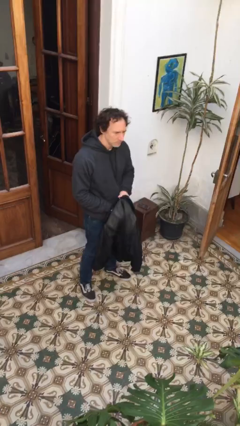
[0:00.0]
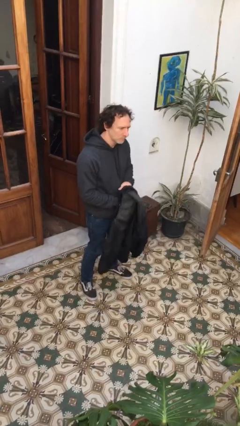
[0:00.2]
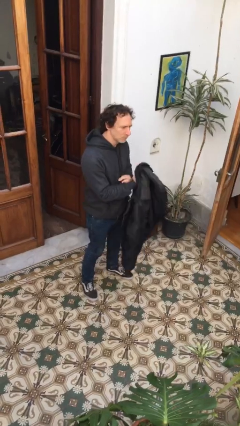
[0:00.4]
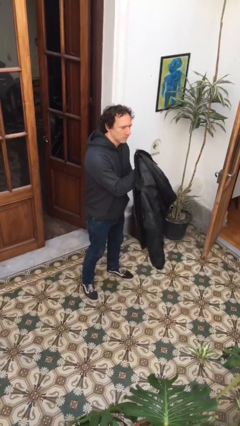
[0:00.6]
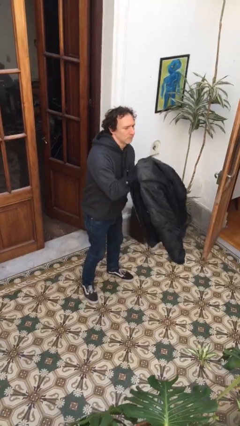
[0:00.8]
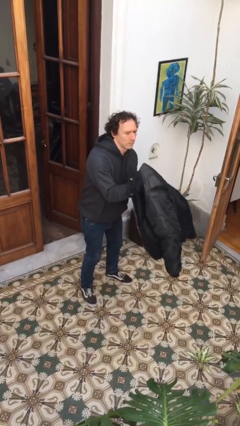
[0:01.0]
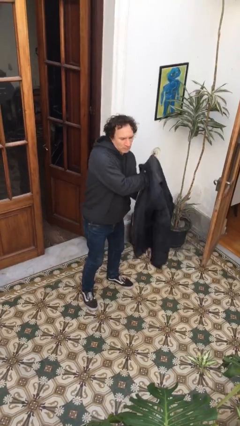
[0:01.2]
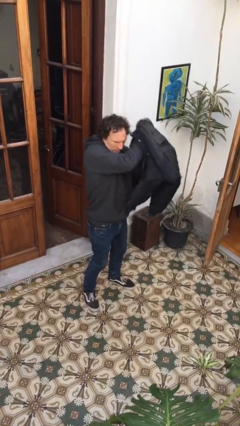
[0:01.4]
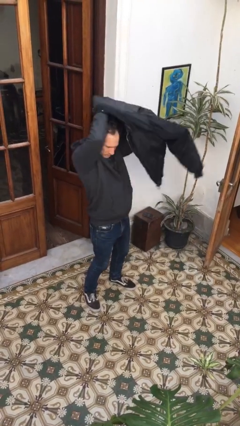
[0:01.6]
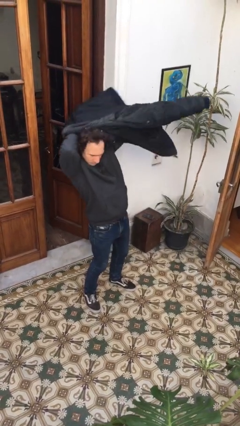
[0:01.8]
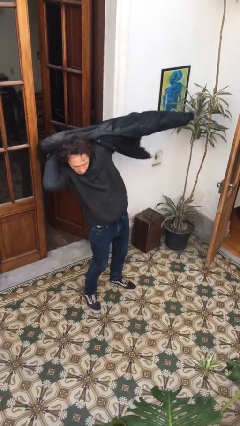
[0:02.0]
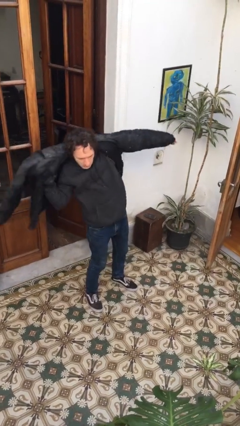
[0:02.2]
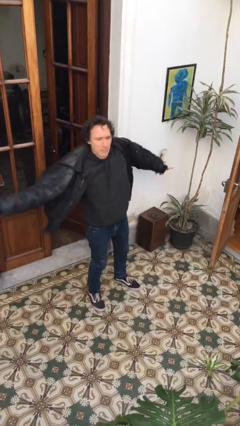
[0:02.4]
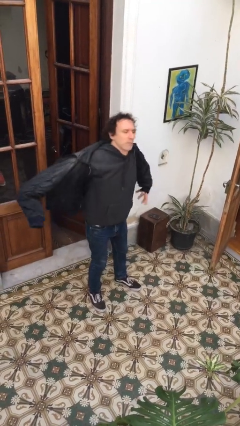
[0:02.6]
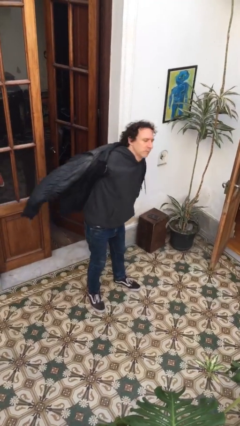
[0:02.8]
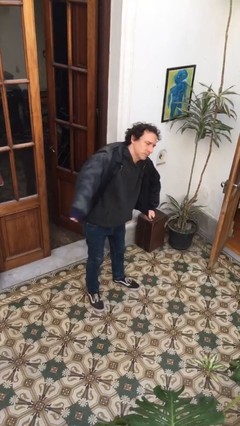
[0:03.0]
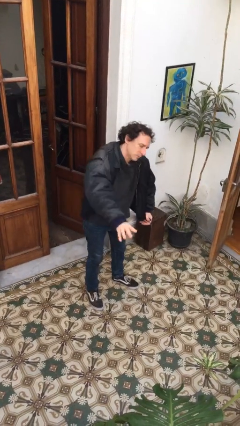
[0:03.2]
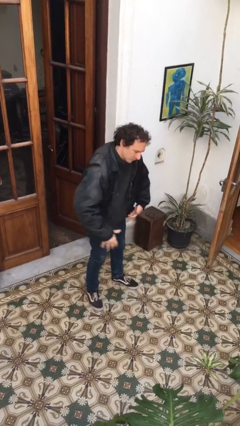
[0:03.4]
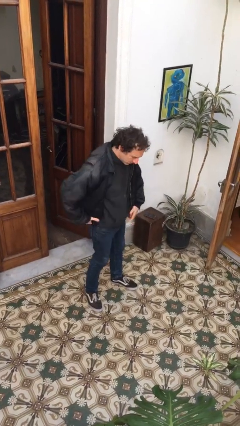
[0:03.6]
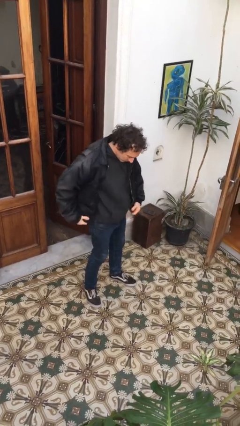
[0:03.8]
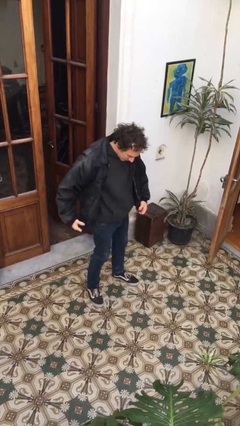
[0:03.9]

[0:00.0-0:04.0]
person puts on jacket

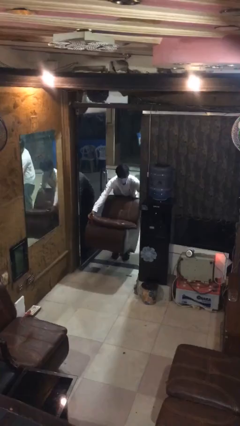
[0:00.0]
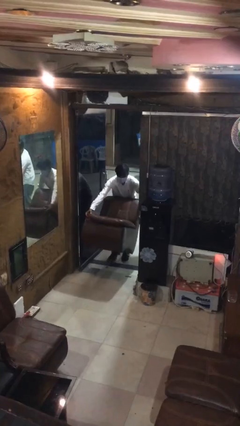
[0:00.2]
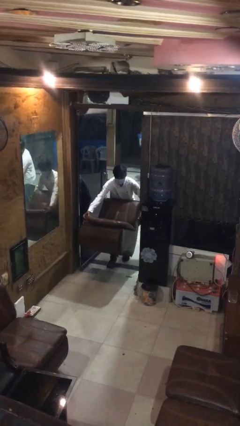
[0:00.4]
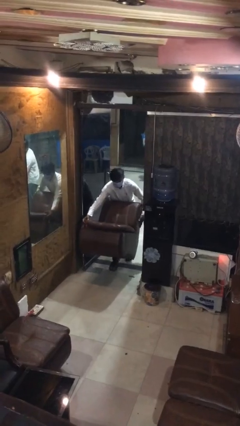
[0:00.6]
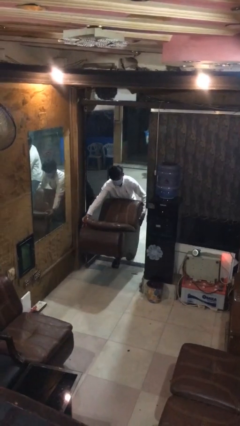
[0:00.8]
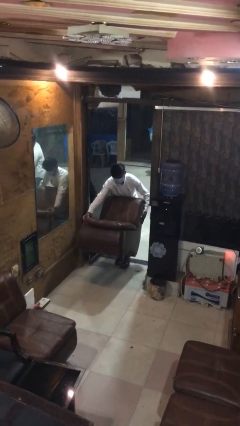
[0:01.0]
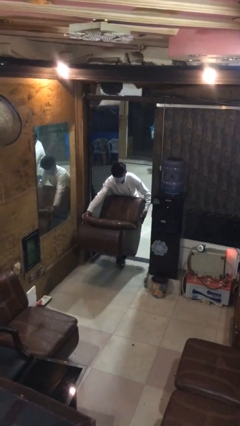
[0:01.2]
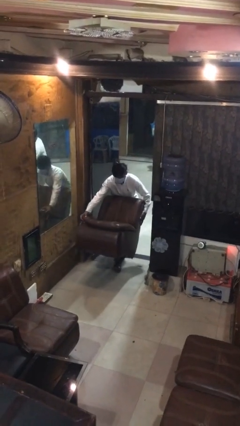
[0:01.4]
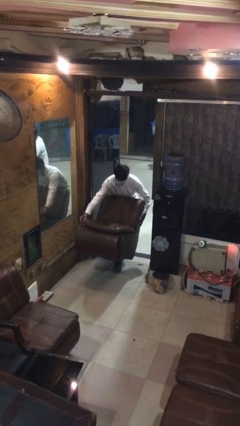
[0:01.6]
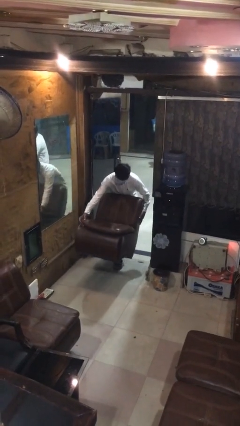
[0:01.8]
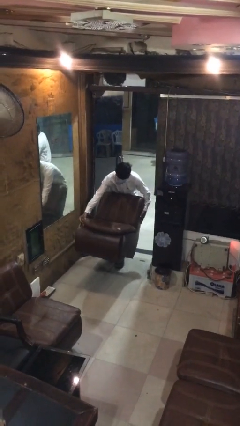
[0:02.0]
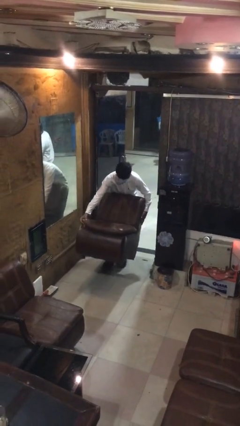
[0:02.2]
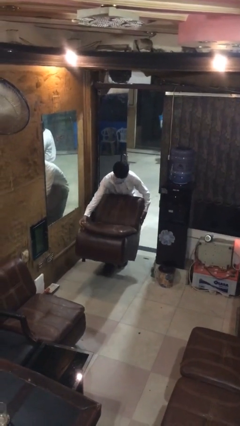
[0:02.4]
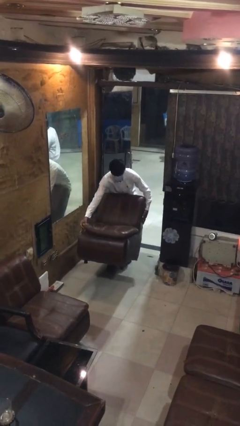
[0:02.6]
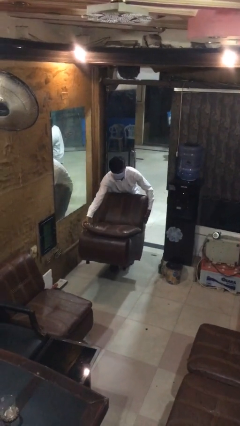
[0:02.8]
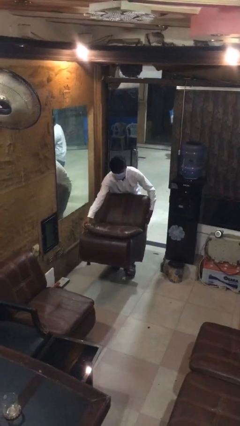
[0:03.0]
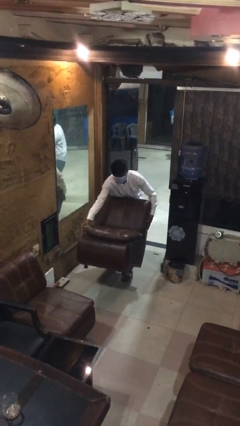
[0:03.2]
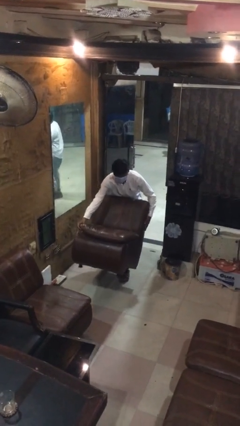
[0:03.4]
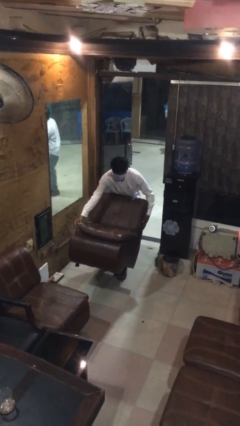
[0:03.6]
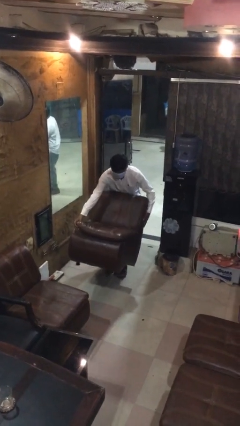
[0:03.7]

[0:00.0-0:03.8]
person carries heavy object

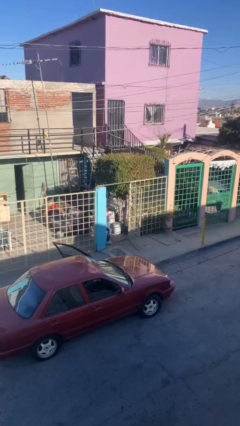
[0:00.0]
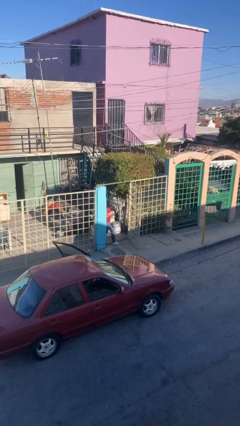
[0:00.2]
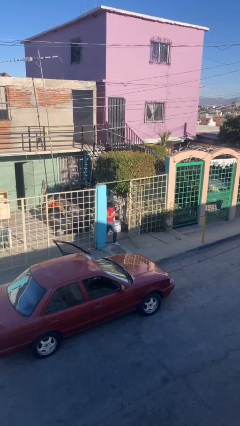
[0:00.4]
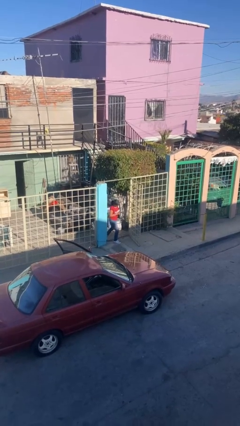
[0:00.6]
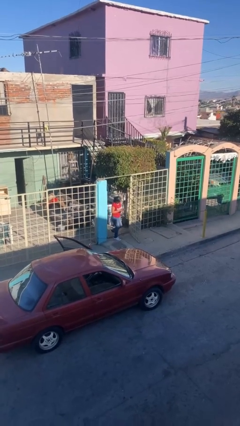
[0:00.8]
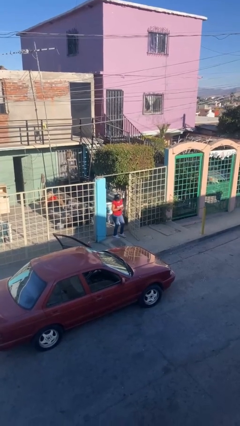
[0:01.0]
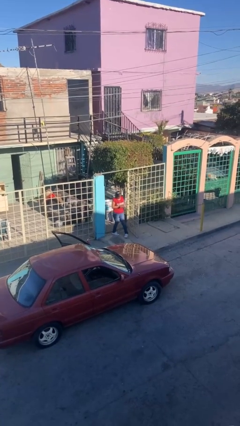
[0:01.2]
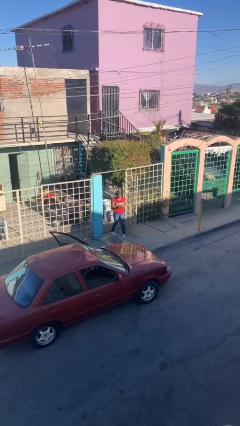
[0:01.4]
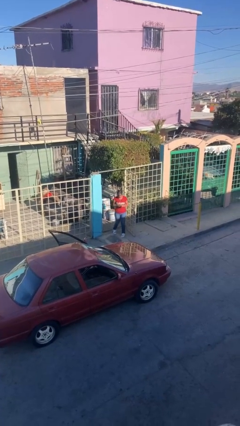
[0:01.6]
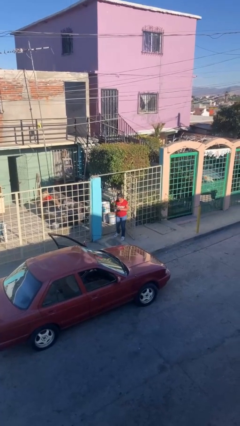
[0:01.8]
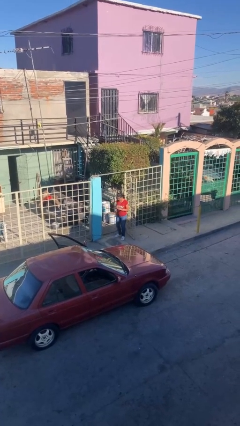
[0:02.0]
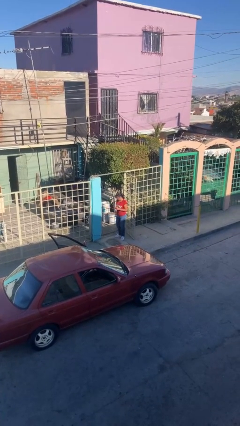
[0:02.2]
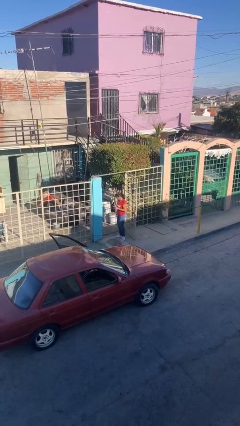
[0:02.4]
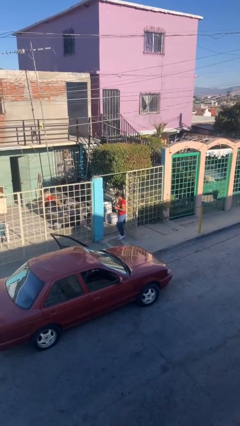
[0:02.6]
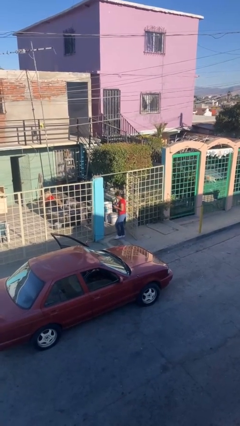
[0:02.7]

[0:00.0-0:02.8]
person enters scene through structure

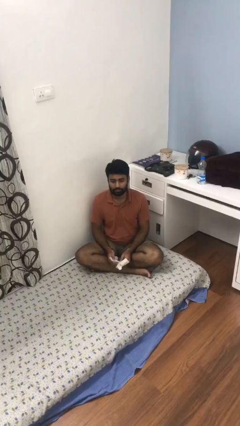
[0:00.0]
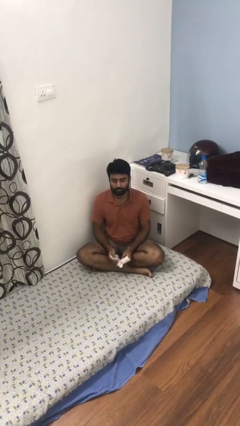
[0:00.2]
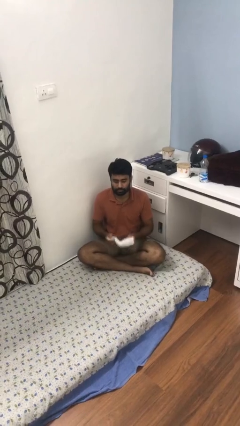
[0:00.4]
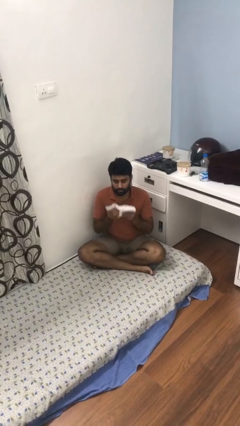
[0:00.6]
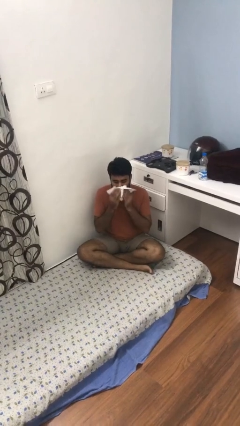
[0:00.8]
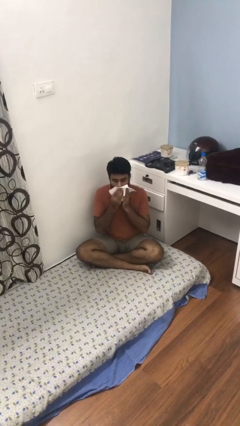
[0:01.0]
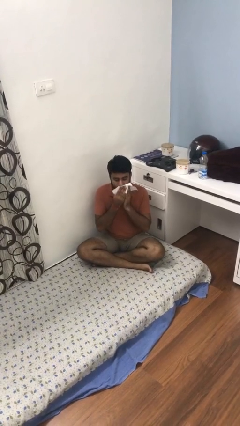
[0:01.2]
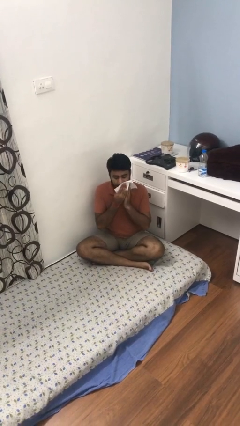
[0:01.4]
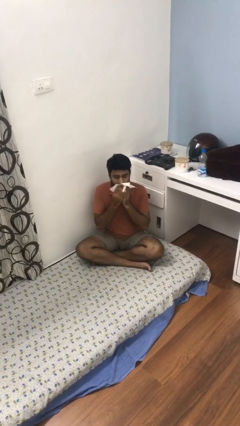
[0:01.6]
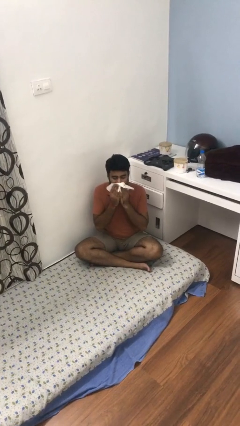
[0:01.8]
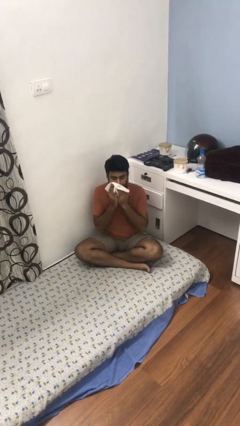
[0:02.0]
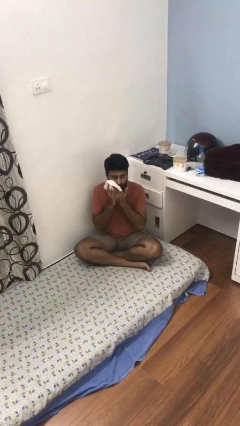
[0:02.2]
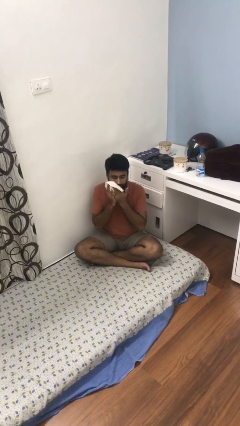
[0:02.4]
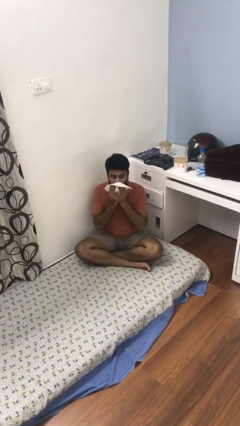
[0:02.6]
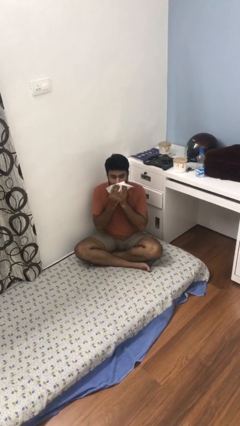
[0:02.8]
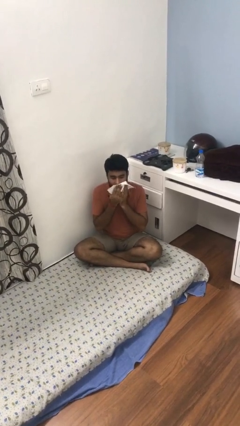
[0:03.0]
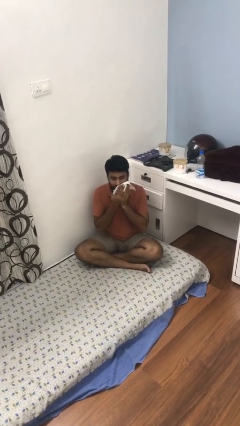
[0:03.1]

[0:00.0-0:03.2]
person wipes mouth with napkin

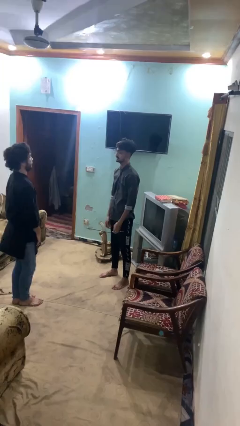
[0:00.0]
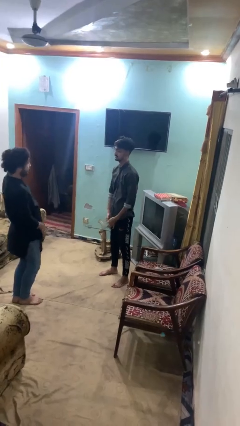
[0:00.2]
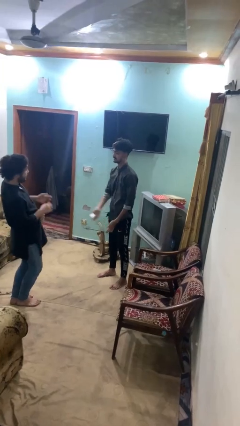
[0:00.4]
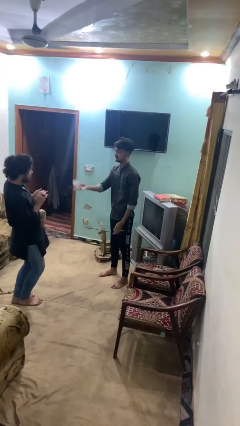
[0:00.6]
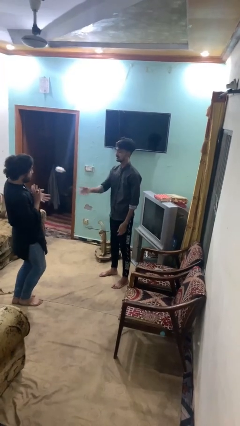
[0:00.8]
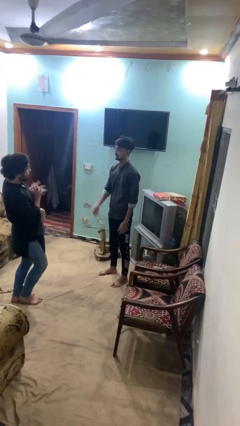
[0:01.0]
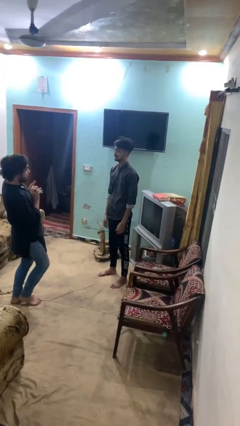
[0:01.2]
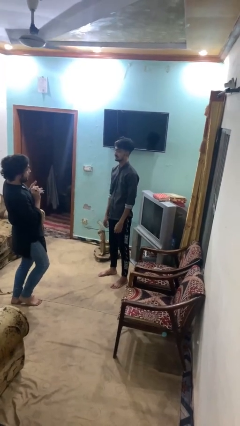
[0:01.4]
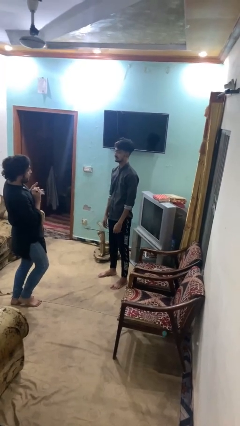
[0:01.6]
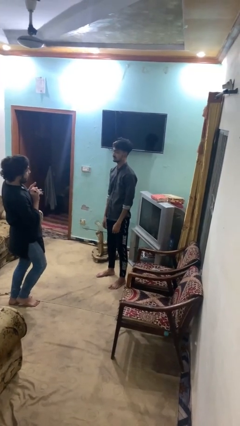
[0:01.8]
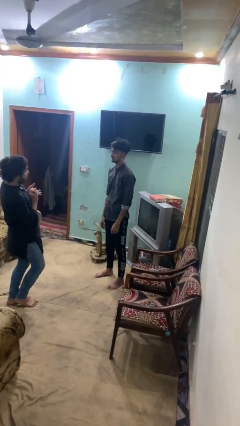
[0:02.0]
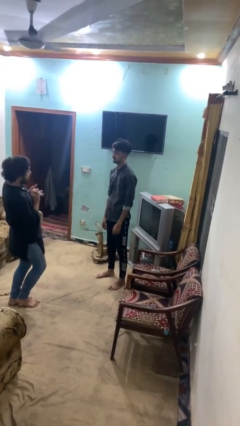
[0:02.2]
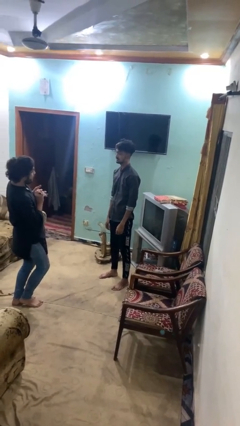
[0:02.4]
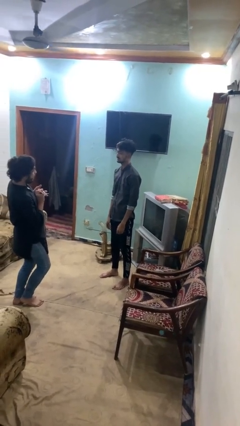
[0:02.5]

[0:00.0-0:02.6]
person throws object to person

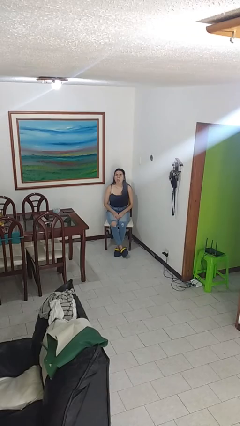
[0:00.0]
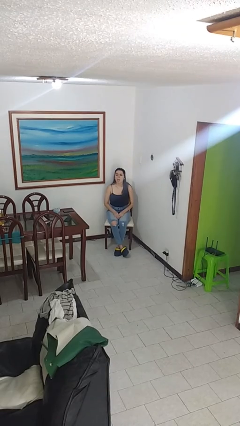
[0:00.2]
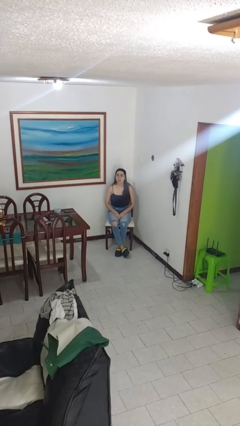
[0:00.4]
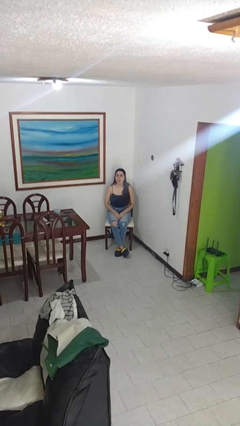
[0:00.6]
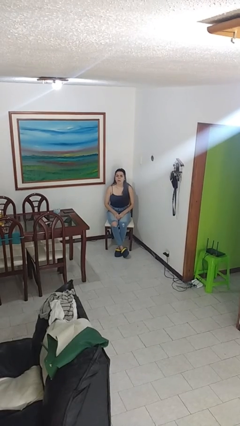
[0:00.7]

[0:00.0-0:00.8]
person sticks out tongue
